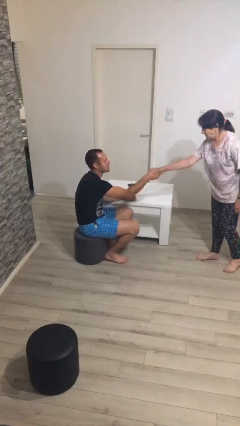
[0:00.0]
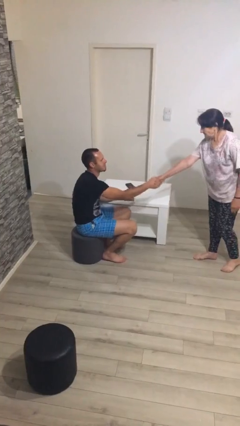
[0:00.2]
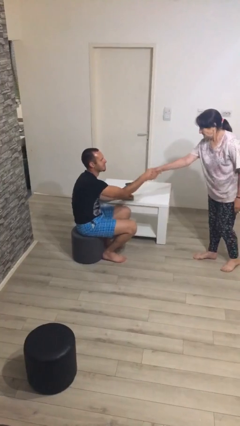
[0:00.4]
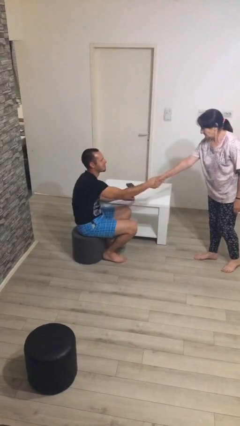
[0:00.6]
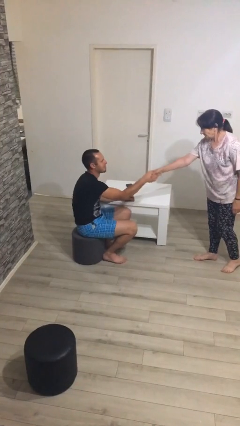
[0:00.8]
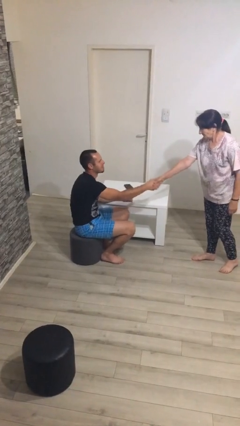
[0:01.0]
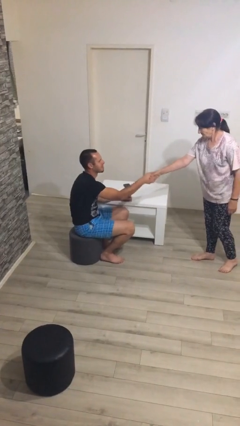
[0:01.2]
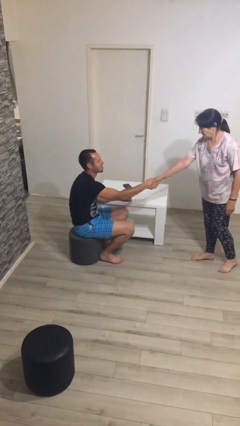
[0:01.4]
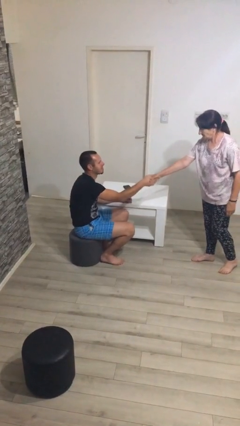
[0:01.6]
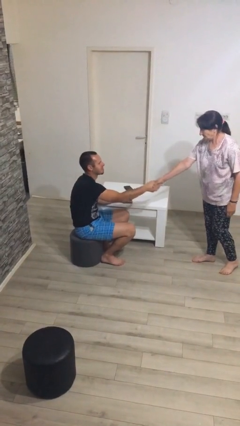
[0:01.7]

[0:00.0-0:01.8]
person shakes hand

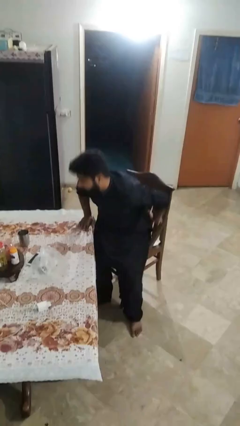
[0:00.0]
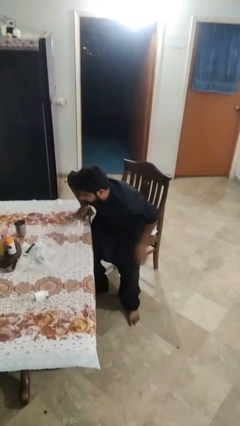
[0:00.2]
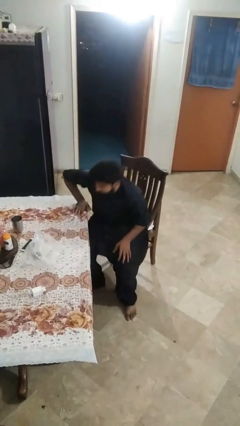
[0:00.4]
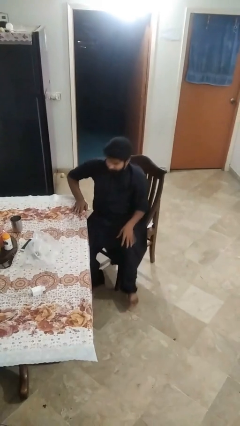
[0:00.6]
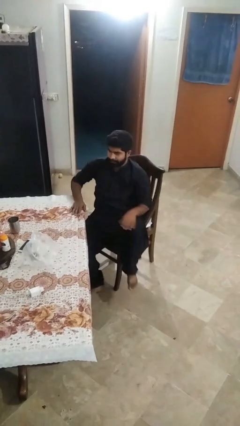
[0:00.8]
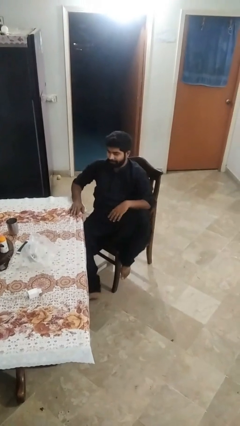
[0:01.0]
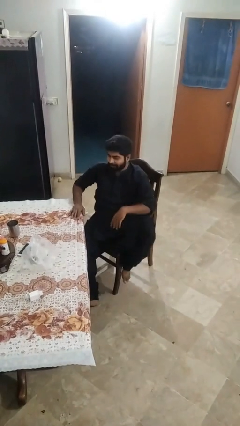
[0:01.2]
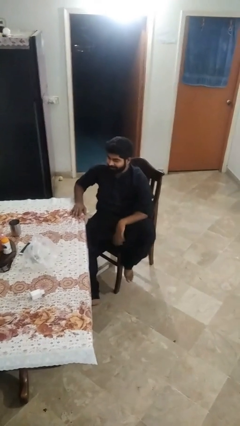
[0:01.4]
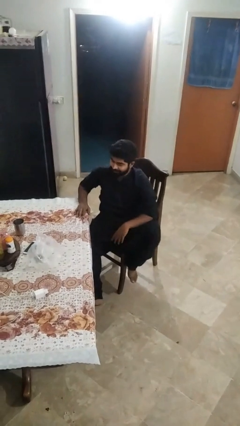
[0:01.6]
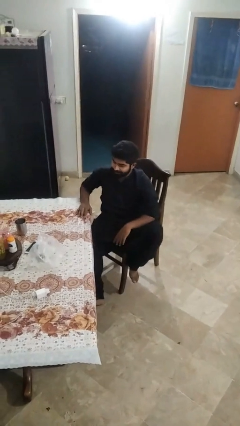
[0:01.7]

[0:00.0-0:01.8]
person sits down

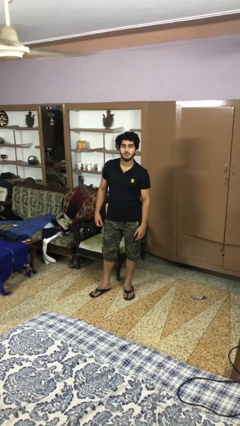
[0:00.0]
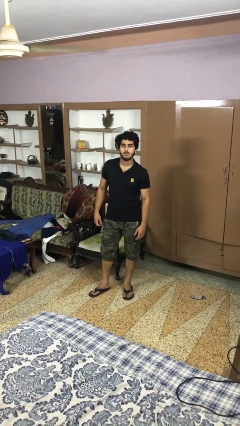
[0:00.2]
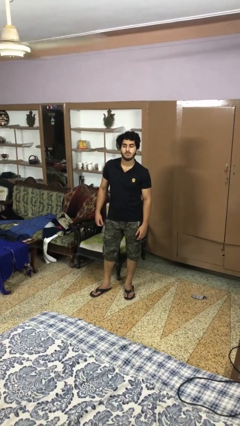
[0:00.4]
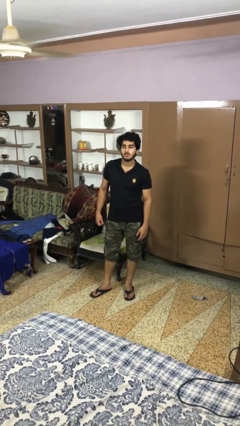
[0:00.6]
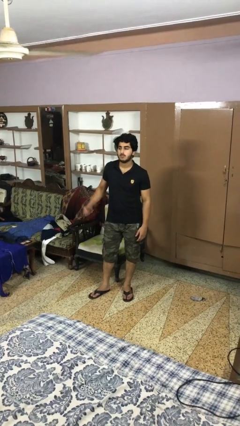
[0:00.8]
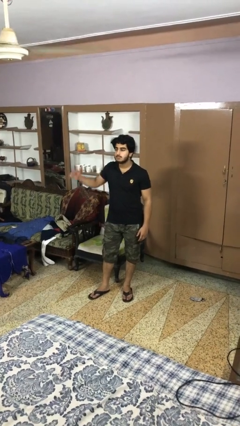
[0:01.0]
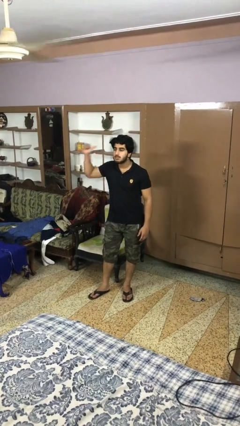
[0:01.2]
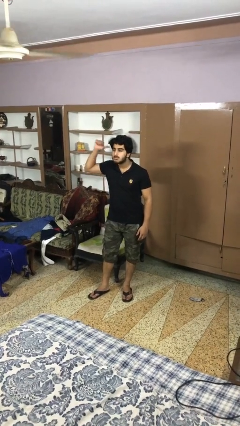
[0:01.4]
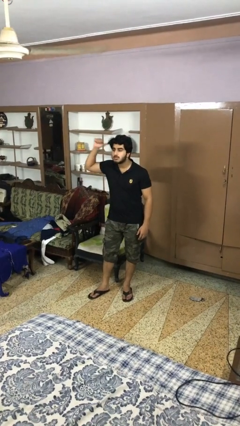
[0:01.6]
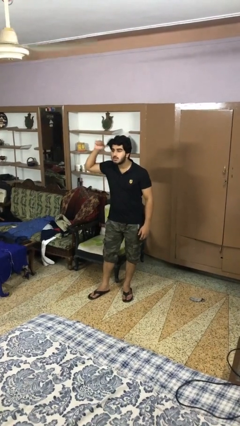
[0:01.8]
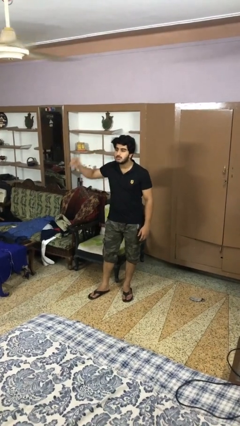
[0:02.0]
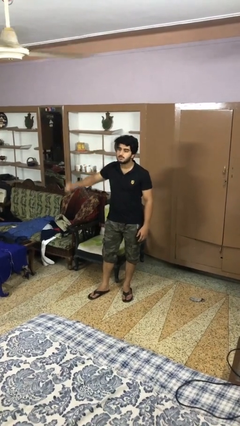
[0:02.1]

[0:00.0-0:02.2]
person gestures behind me

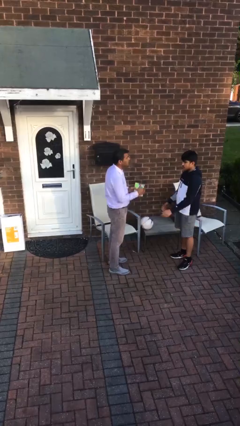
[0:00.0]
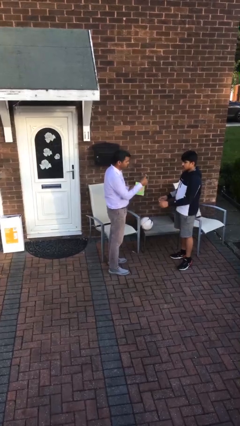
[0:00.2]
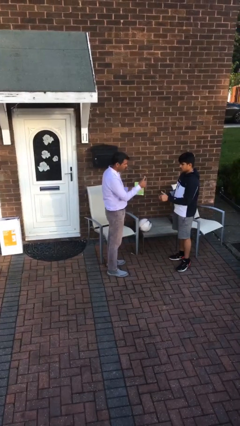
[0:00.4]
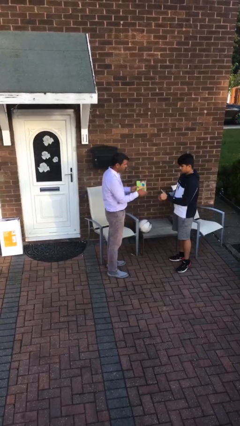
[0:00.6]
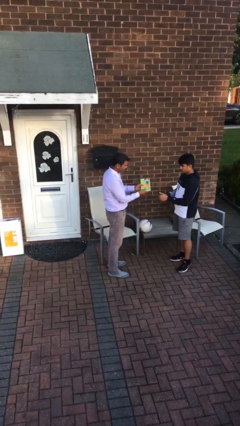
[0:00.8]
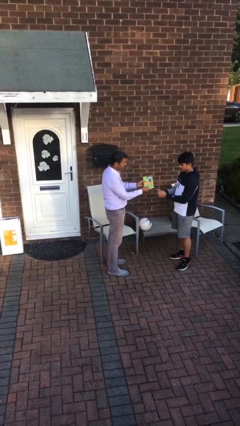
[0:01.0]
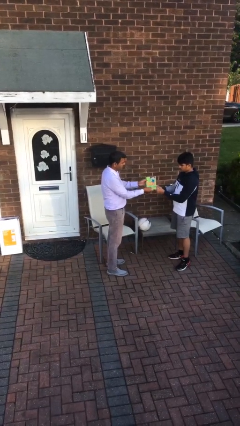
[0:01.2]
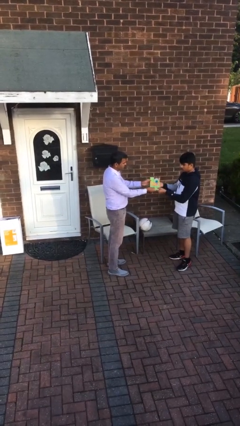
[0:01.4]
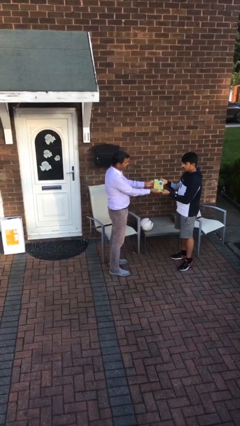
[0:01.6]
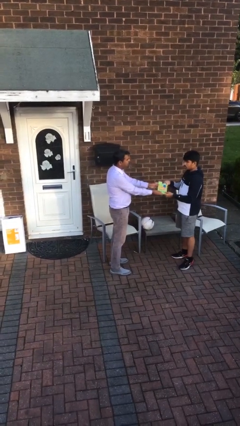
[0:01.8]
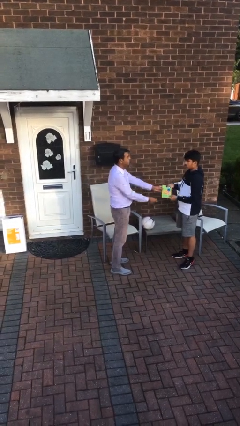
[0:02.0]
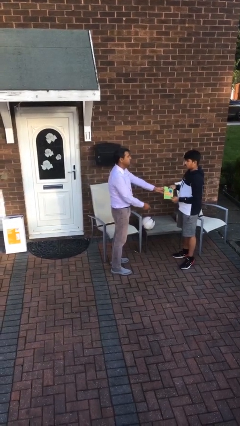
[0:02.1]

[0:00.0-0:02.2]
person transfers object to person

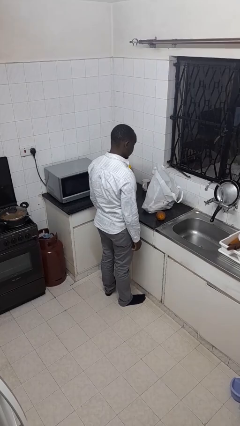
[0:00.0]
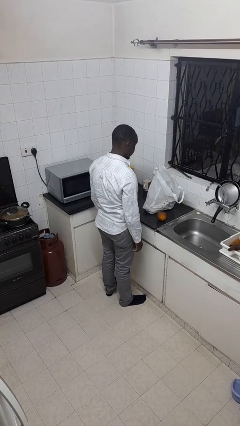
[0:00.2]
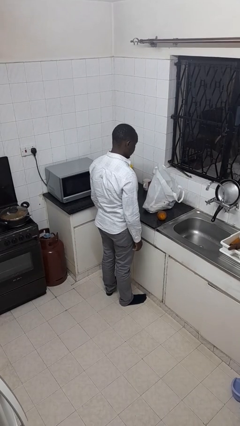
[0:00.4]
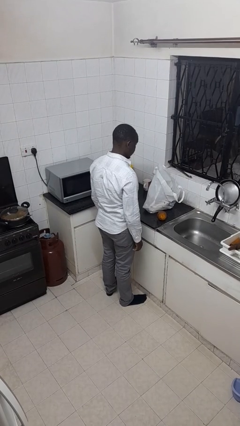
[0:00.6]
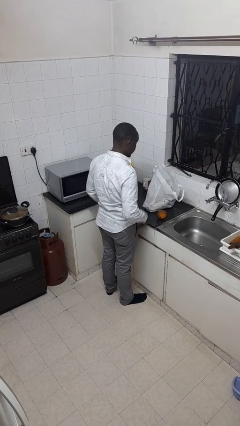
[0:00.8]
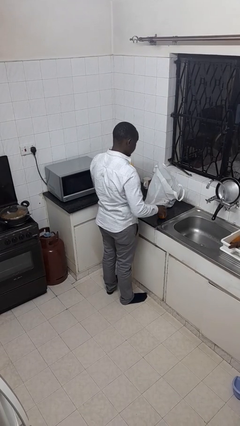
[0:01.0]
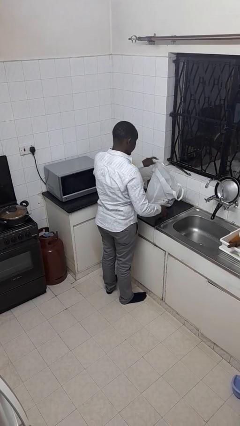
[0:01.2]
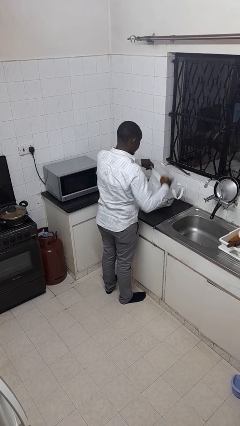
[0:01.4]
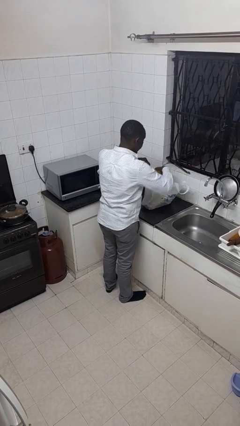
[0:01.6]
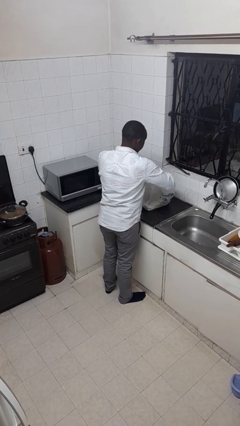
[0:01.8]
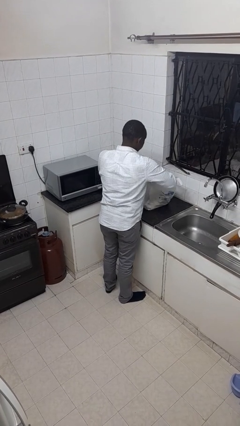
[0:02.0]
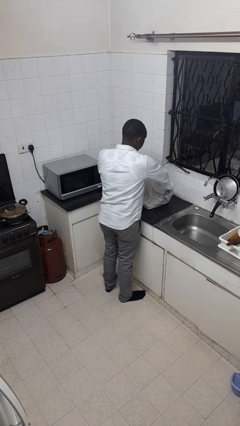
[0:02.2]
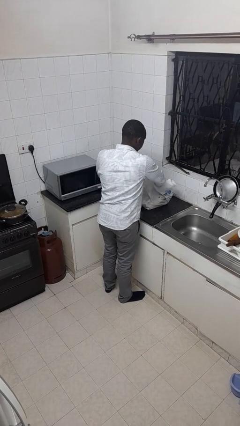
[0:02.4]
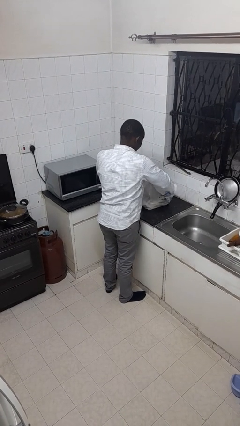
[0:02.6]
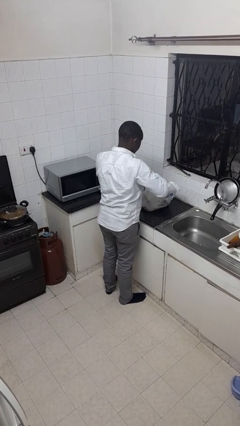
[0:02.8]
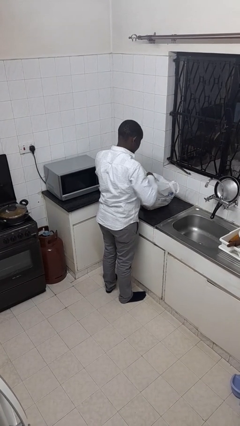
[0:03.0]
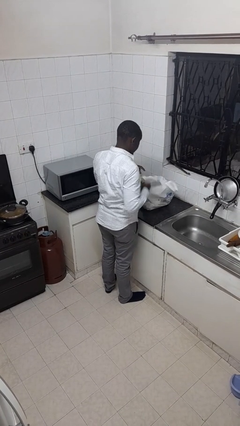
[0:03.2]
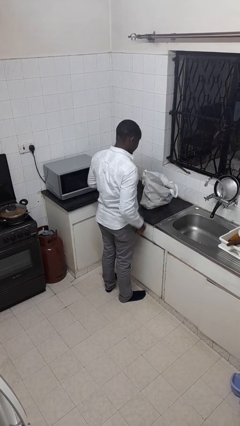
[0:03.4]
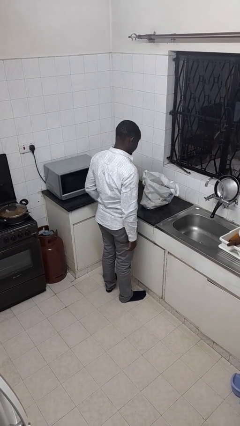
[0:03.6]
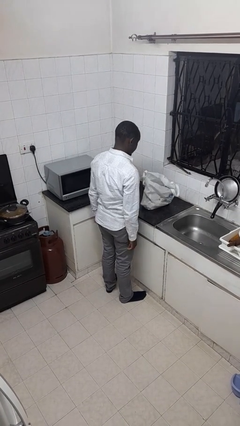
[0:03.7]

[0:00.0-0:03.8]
person puts object into bag

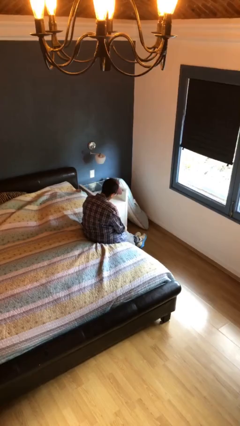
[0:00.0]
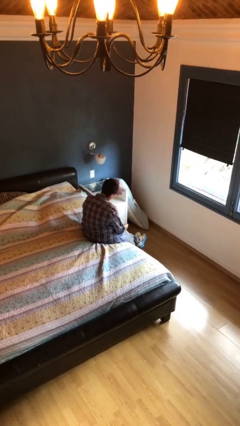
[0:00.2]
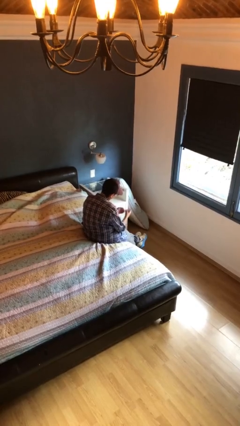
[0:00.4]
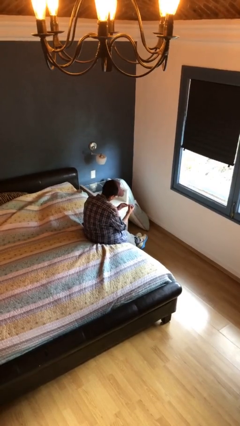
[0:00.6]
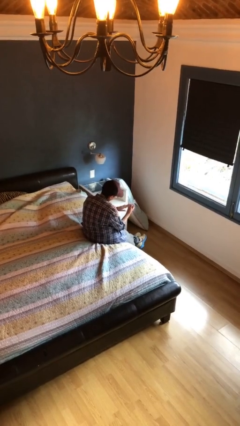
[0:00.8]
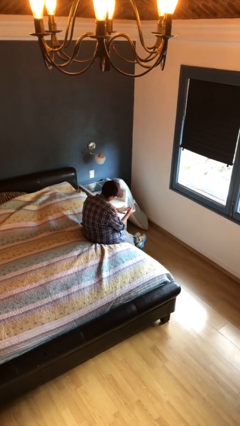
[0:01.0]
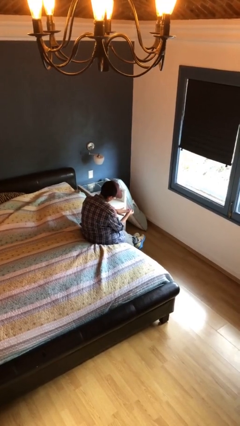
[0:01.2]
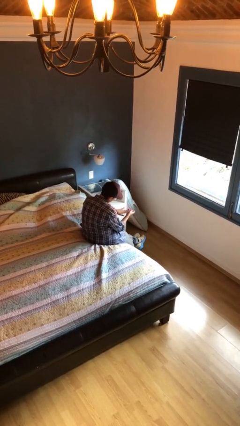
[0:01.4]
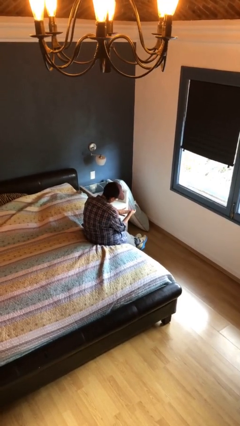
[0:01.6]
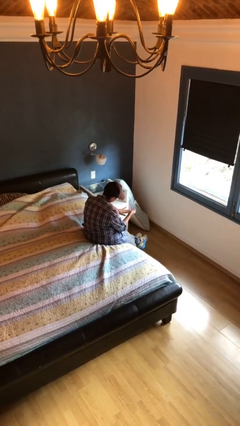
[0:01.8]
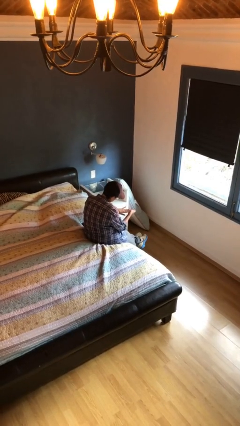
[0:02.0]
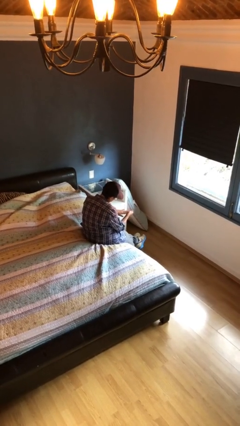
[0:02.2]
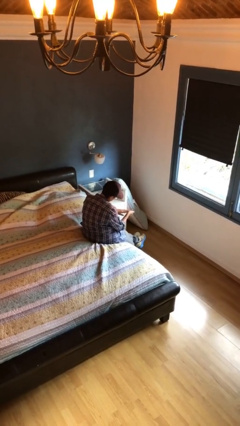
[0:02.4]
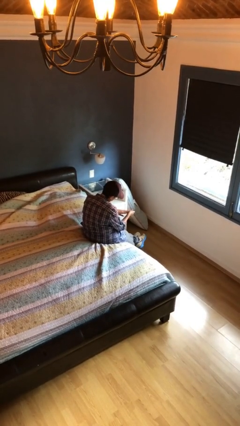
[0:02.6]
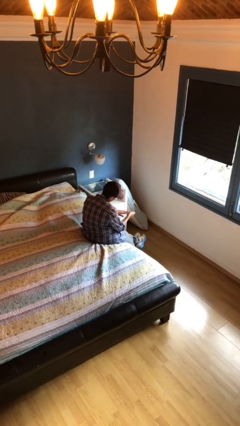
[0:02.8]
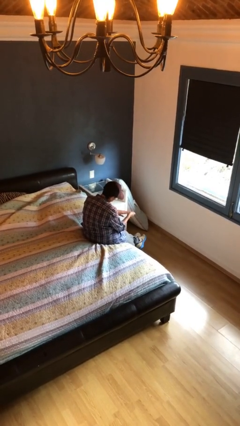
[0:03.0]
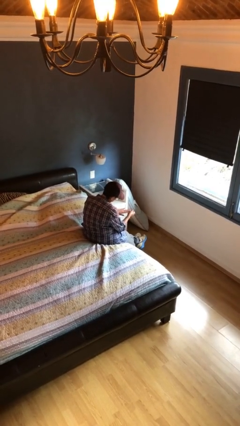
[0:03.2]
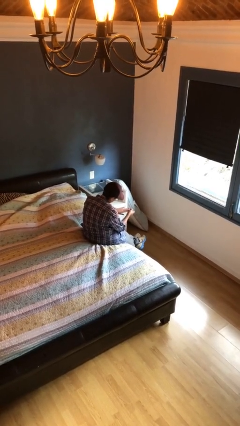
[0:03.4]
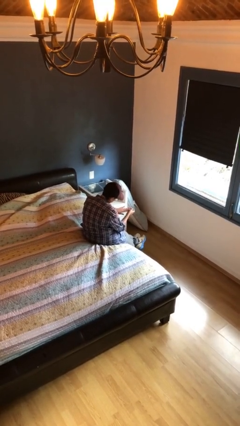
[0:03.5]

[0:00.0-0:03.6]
person clips fingernails

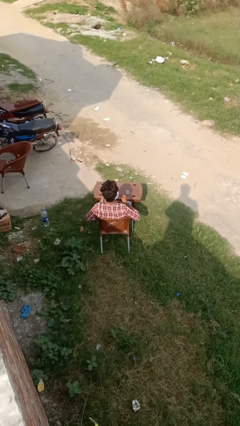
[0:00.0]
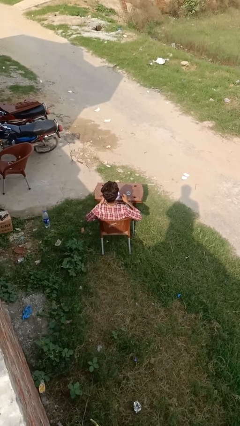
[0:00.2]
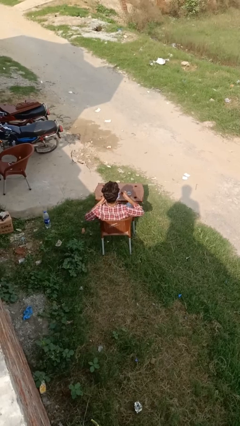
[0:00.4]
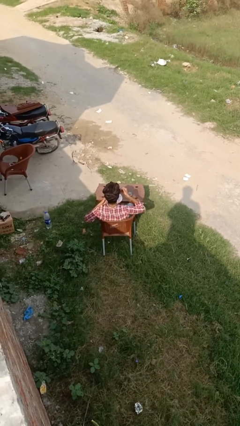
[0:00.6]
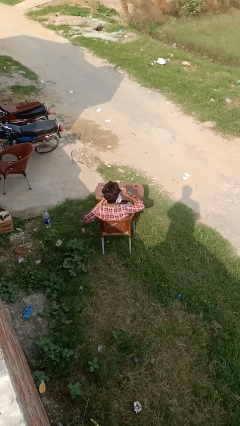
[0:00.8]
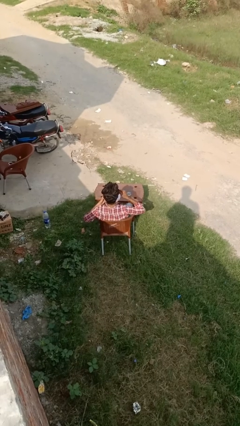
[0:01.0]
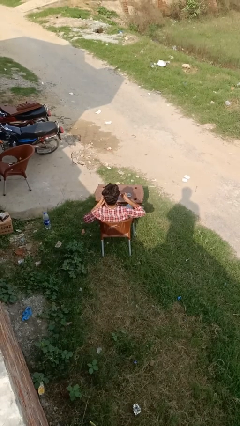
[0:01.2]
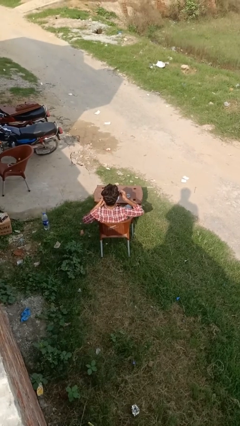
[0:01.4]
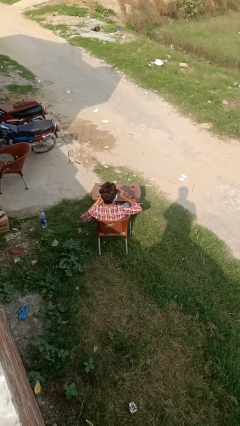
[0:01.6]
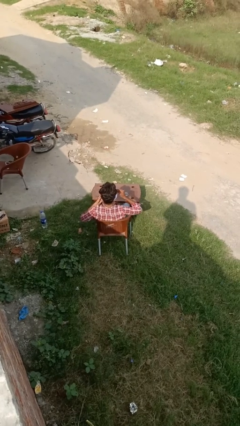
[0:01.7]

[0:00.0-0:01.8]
person eats with utensil
